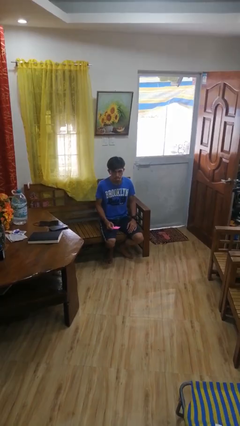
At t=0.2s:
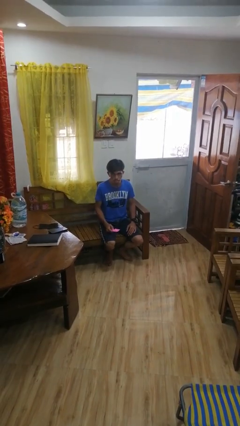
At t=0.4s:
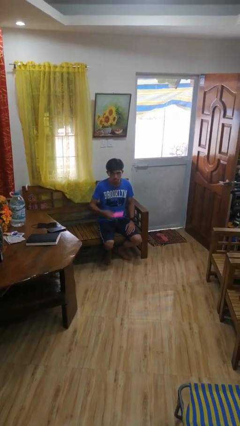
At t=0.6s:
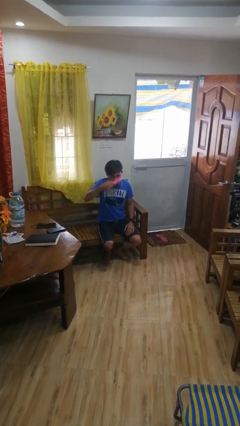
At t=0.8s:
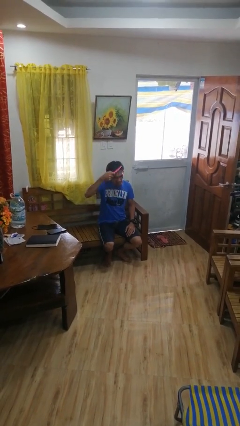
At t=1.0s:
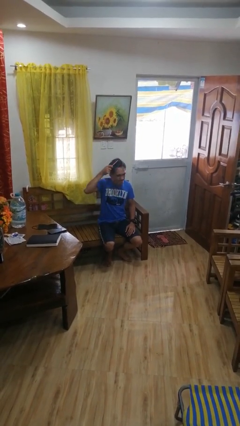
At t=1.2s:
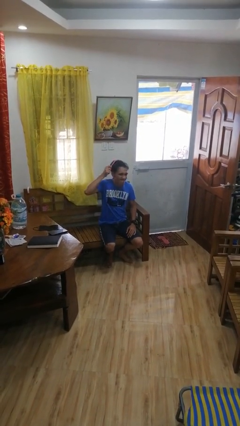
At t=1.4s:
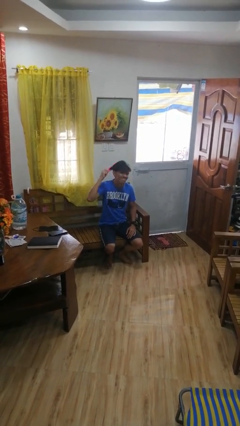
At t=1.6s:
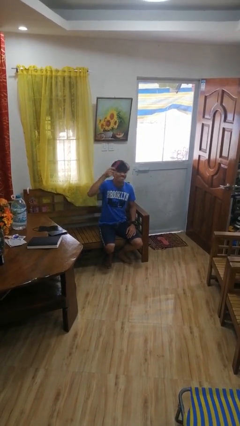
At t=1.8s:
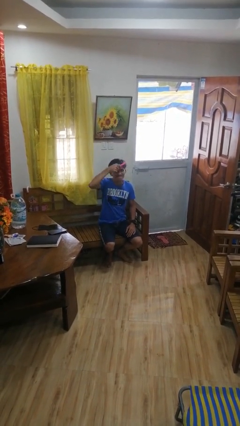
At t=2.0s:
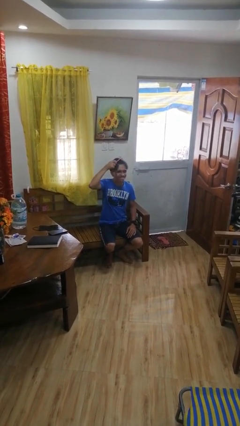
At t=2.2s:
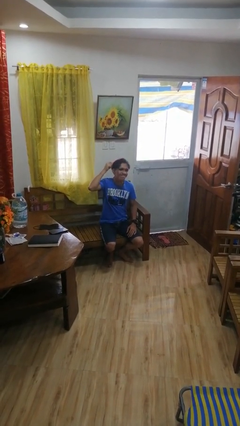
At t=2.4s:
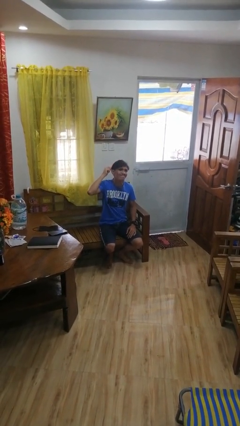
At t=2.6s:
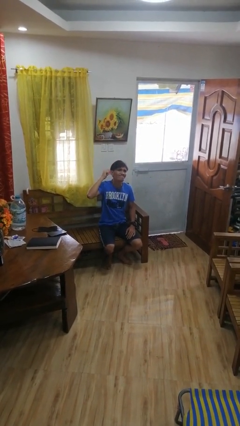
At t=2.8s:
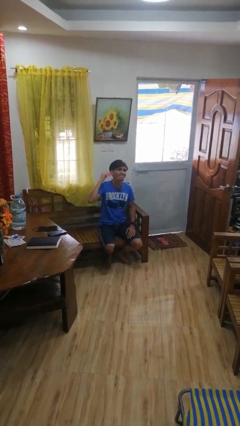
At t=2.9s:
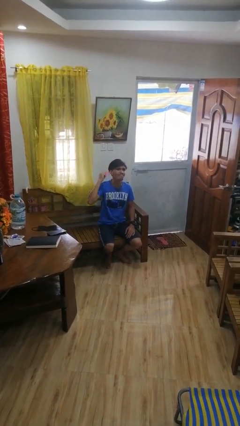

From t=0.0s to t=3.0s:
person brushes hair

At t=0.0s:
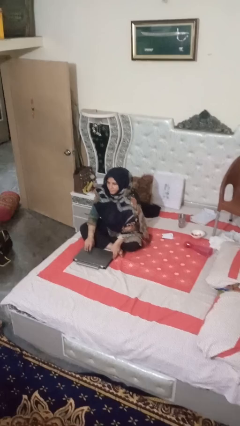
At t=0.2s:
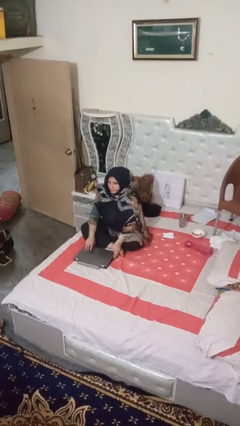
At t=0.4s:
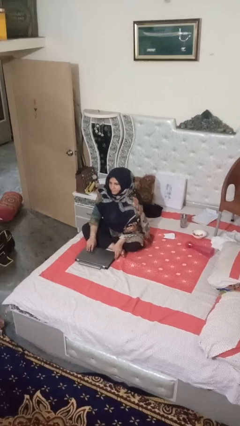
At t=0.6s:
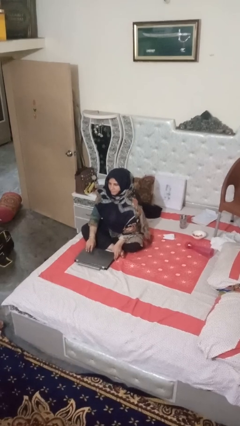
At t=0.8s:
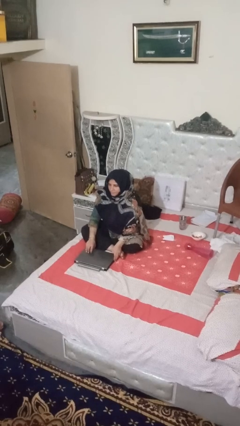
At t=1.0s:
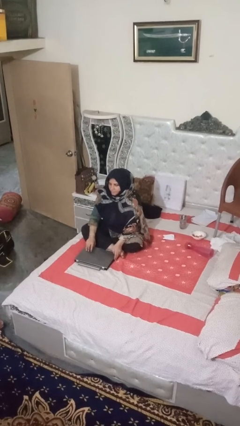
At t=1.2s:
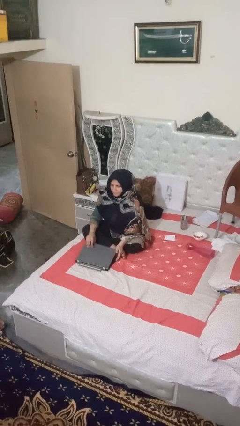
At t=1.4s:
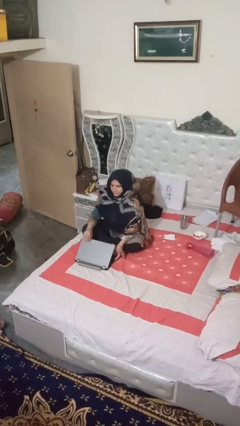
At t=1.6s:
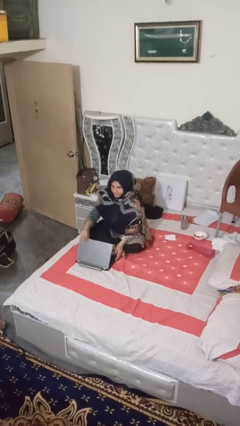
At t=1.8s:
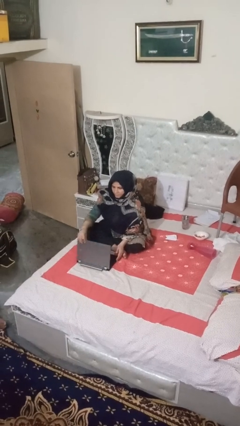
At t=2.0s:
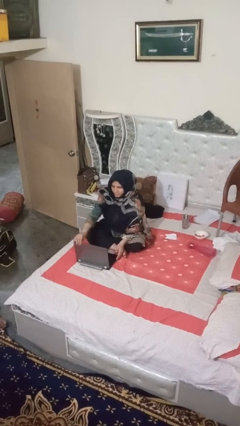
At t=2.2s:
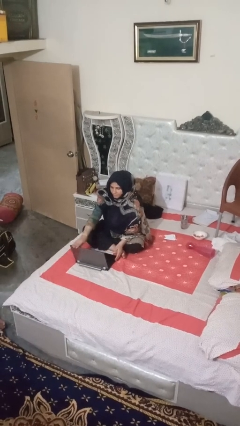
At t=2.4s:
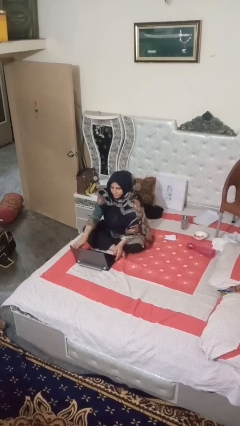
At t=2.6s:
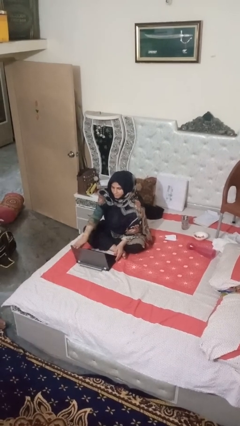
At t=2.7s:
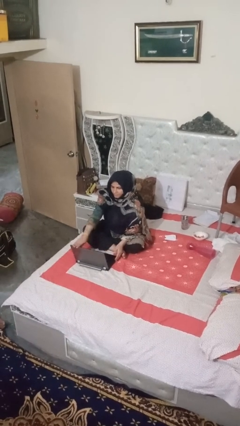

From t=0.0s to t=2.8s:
person opens laptop

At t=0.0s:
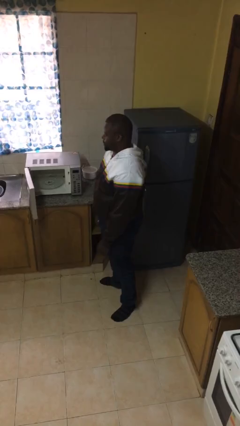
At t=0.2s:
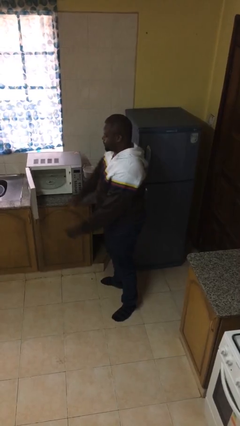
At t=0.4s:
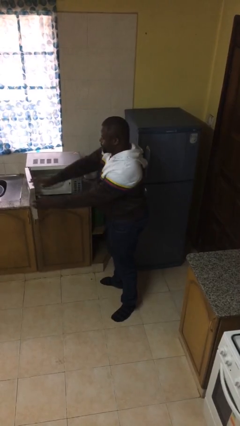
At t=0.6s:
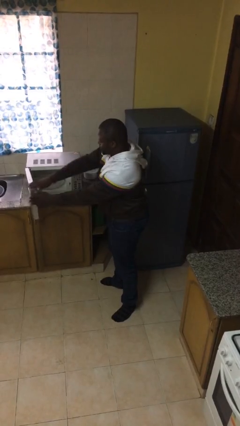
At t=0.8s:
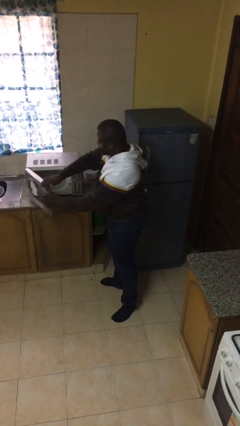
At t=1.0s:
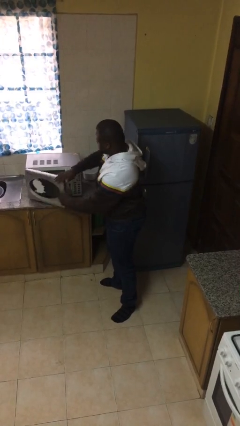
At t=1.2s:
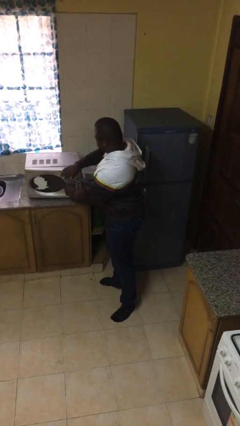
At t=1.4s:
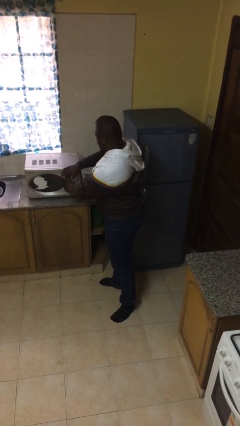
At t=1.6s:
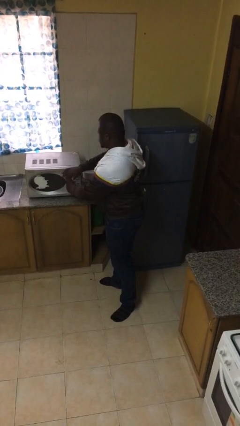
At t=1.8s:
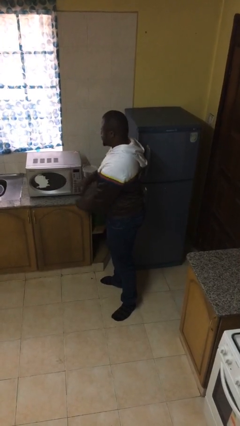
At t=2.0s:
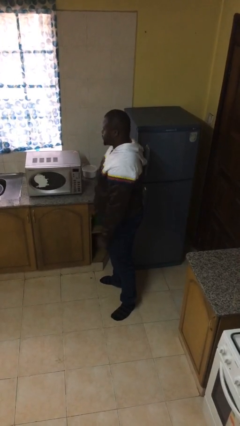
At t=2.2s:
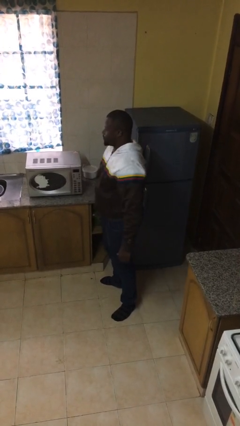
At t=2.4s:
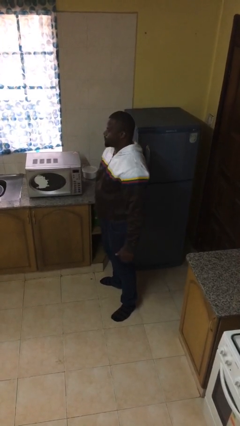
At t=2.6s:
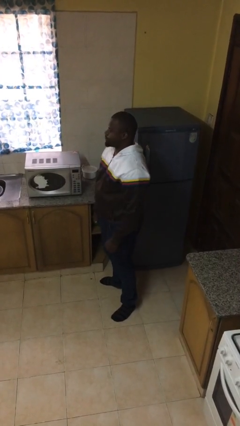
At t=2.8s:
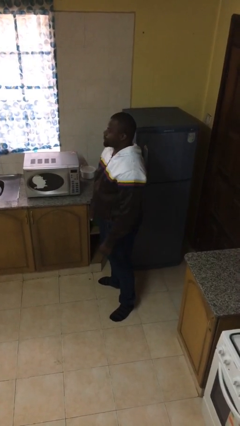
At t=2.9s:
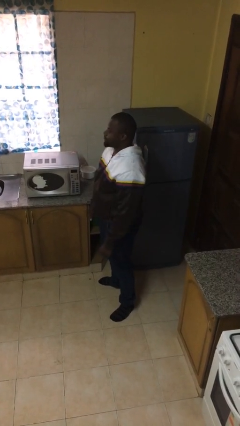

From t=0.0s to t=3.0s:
person closes microwave

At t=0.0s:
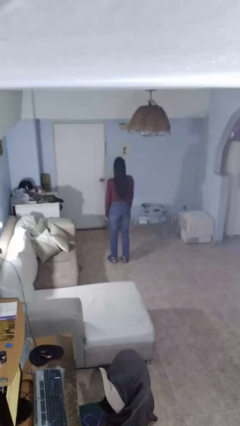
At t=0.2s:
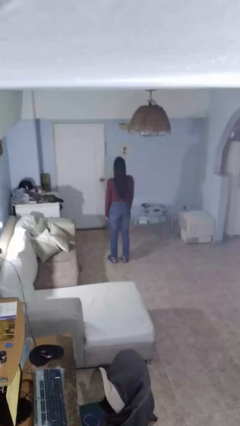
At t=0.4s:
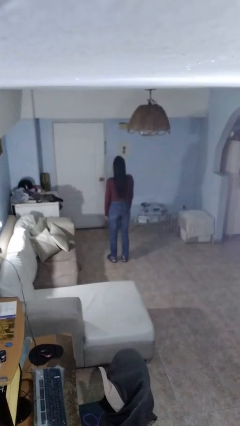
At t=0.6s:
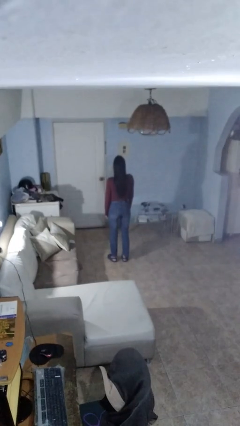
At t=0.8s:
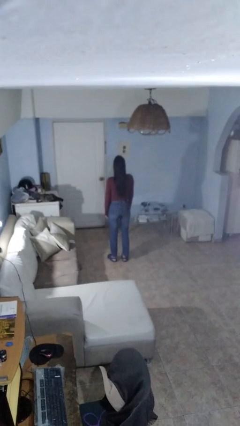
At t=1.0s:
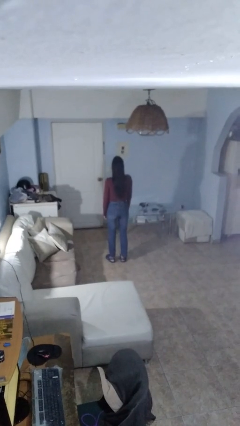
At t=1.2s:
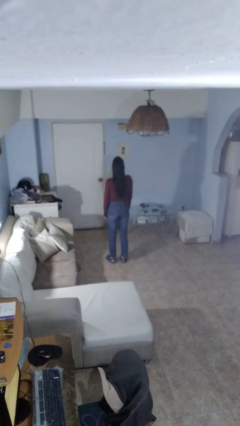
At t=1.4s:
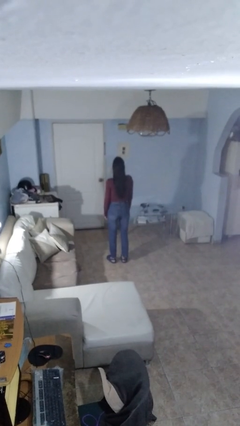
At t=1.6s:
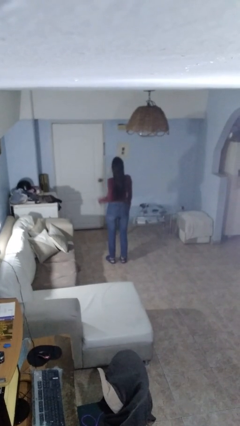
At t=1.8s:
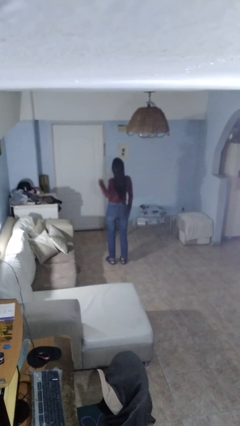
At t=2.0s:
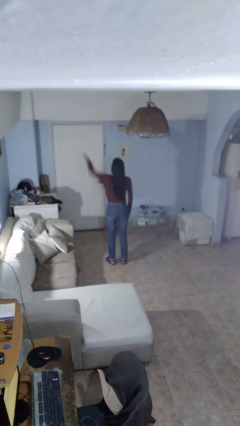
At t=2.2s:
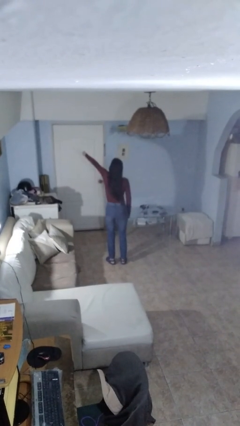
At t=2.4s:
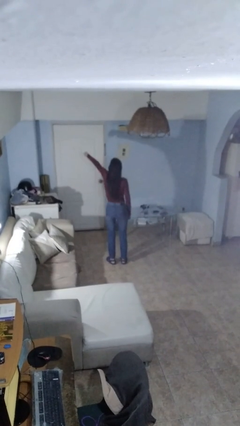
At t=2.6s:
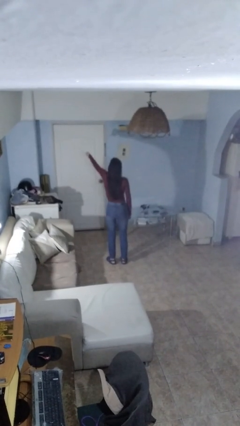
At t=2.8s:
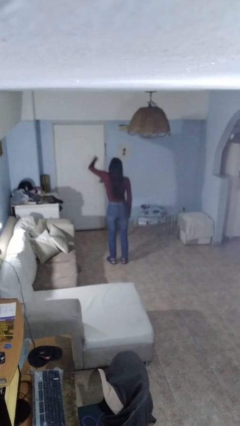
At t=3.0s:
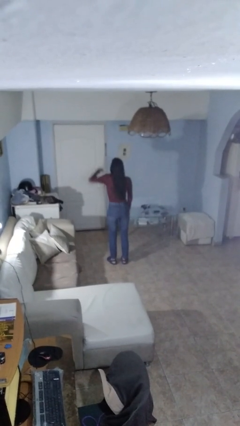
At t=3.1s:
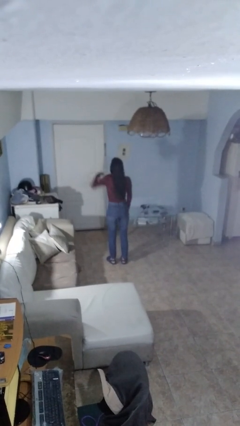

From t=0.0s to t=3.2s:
person punches

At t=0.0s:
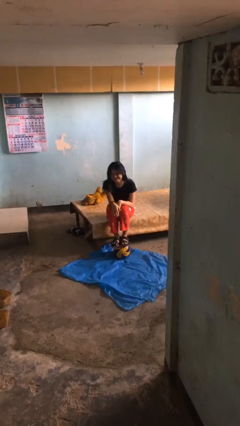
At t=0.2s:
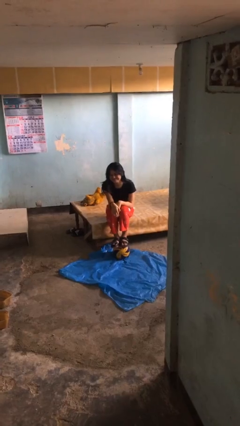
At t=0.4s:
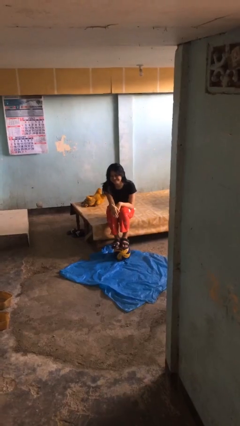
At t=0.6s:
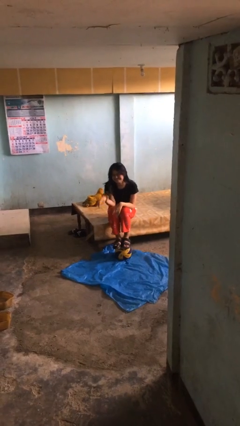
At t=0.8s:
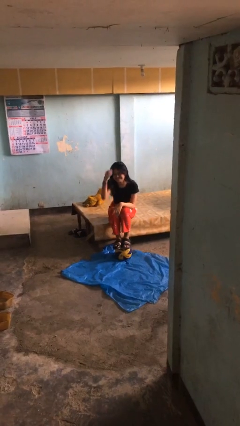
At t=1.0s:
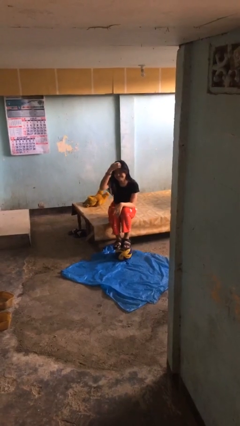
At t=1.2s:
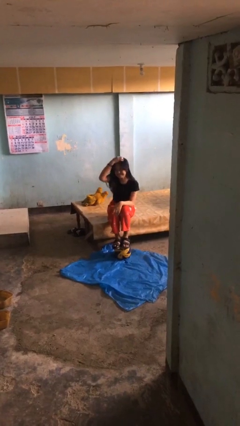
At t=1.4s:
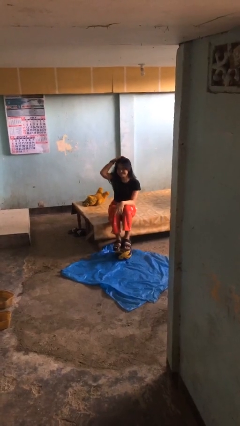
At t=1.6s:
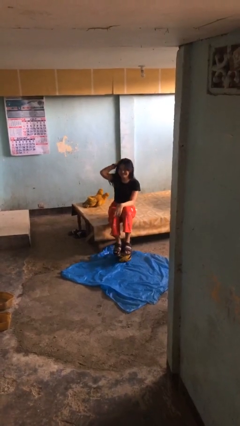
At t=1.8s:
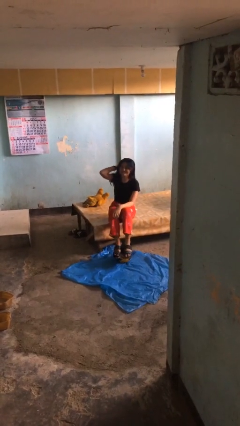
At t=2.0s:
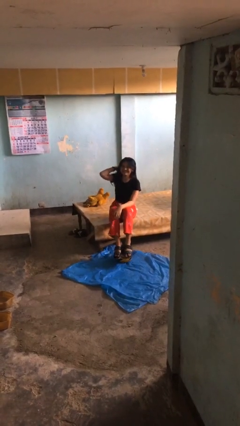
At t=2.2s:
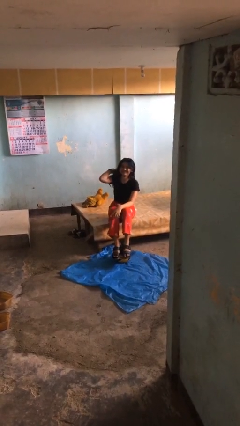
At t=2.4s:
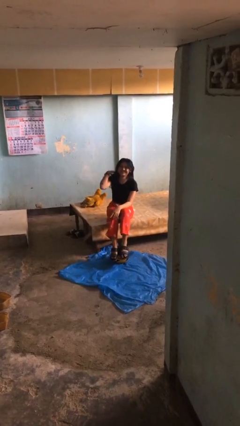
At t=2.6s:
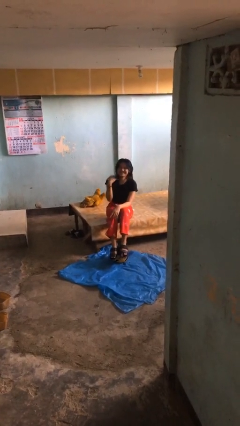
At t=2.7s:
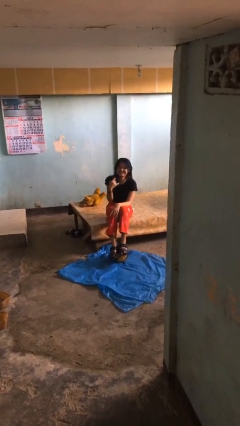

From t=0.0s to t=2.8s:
person strokes hair

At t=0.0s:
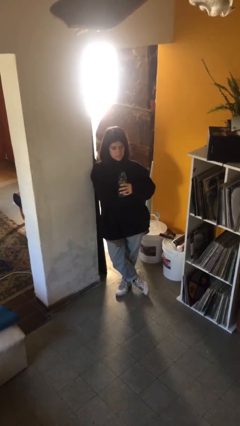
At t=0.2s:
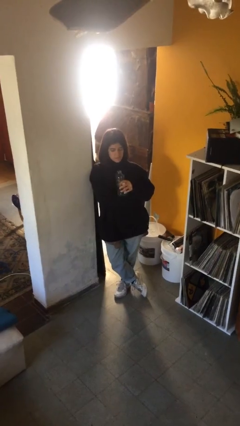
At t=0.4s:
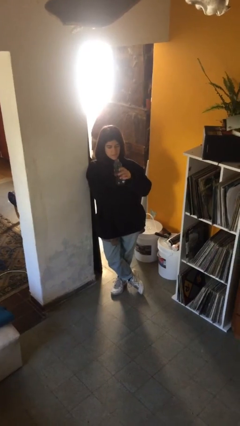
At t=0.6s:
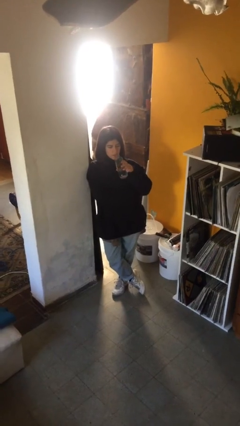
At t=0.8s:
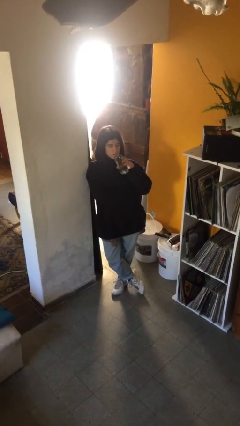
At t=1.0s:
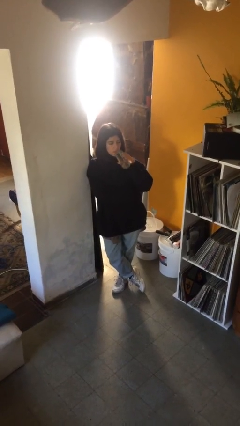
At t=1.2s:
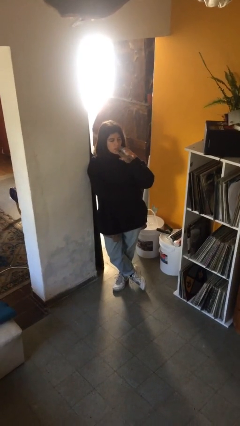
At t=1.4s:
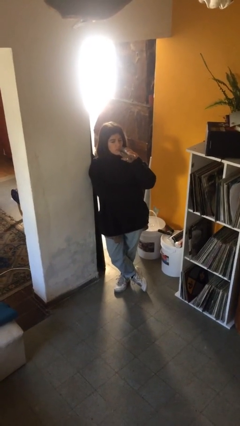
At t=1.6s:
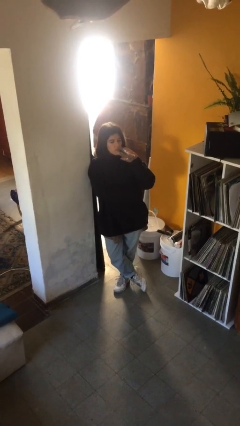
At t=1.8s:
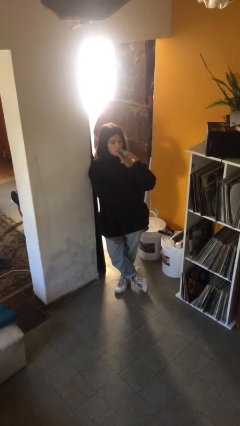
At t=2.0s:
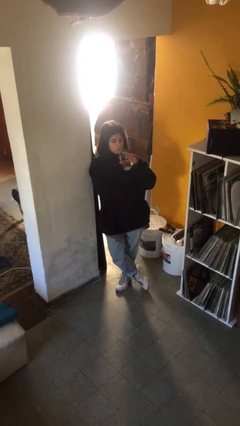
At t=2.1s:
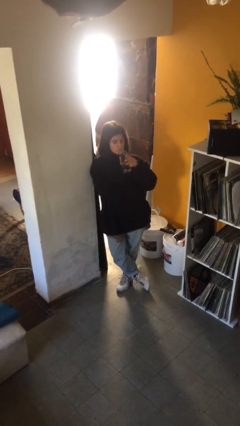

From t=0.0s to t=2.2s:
person drinks from bottle
